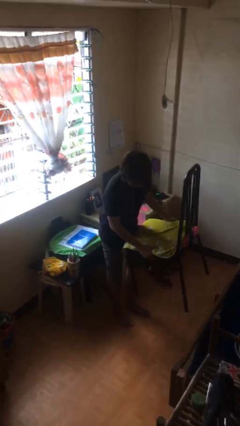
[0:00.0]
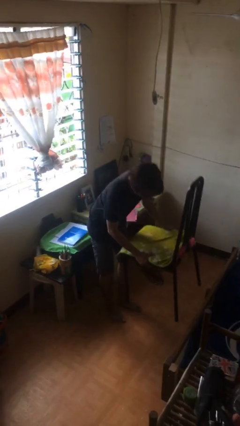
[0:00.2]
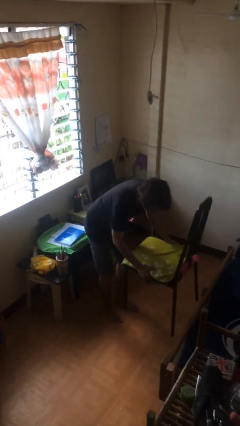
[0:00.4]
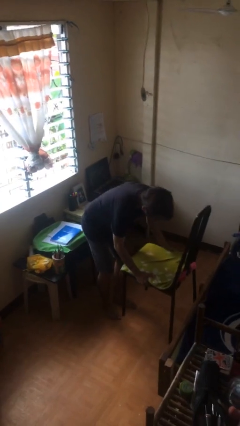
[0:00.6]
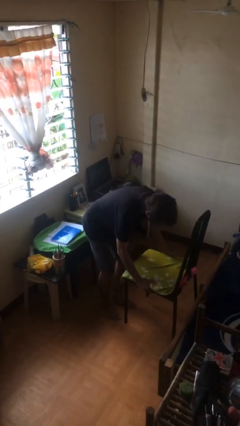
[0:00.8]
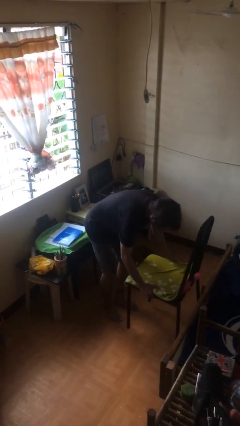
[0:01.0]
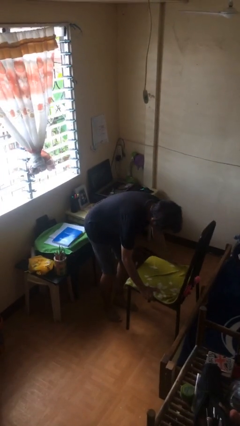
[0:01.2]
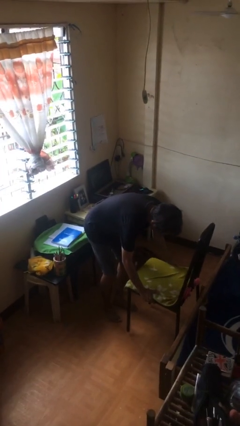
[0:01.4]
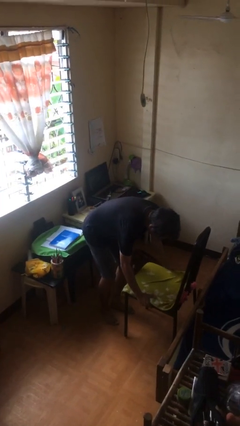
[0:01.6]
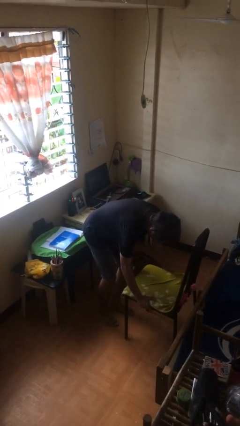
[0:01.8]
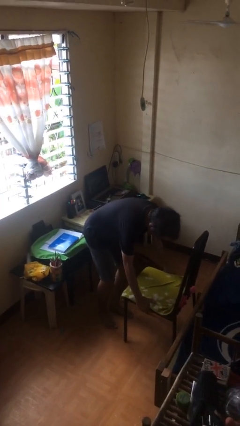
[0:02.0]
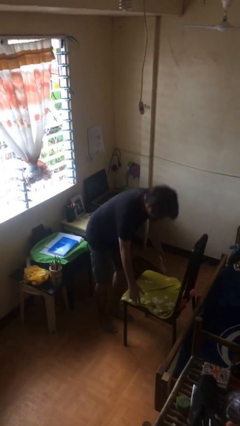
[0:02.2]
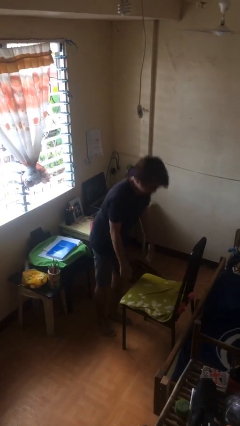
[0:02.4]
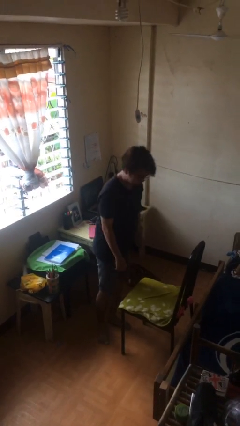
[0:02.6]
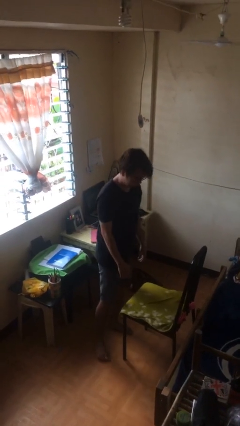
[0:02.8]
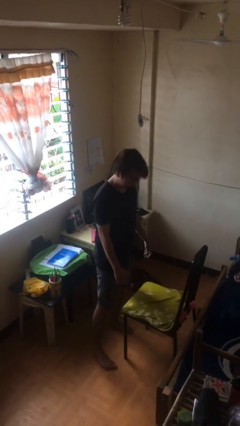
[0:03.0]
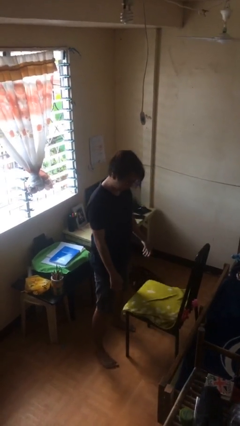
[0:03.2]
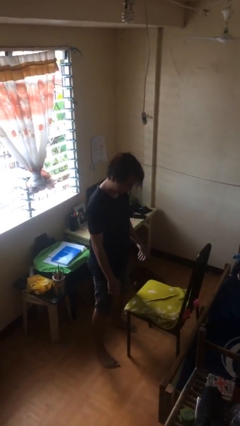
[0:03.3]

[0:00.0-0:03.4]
person puts down object on floor

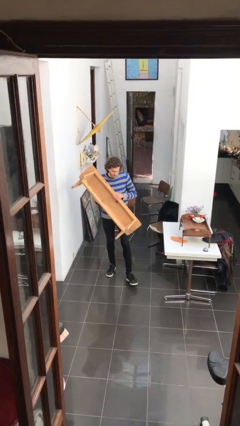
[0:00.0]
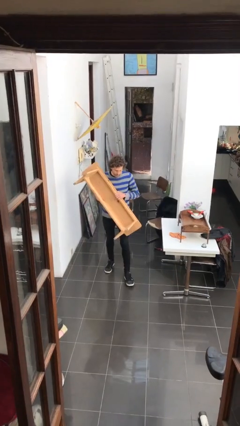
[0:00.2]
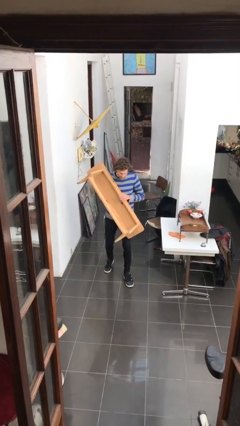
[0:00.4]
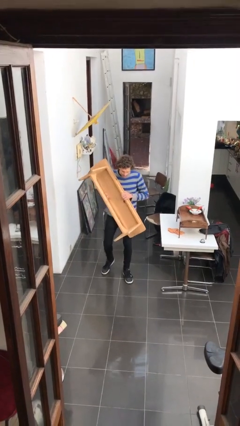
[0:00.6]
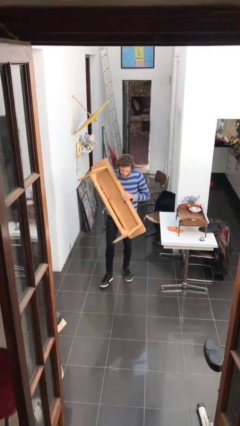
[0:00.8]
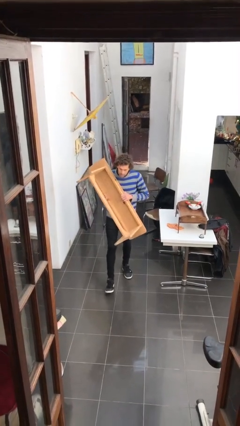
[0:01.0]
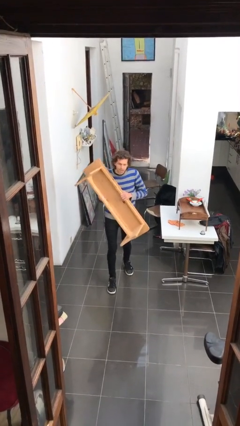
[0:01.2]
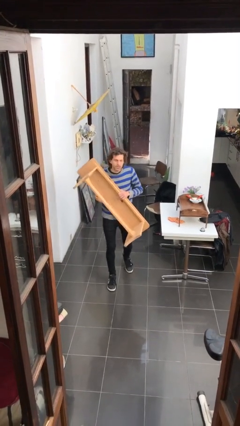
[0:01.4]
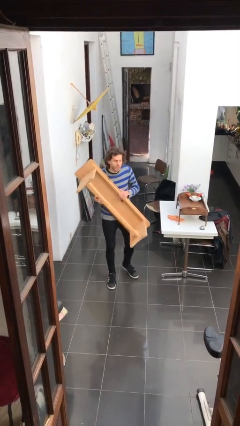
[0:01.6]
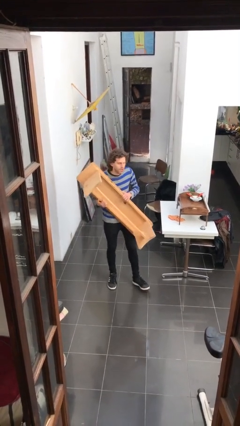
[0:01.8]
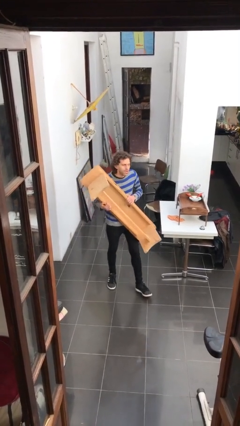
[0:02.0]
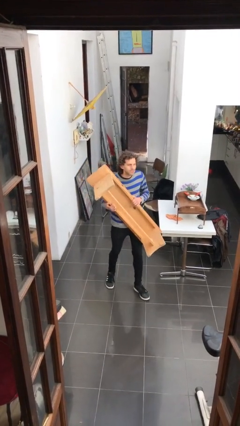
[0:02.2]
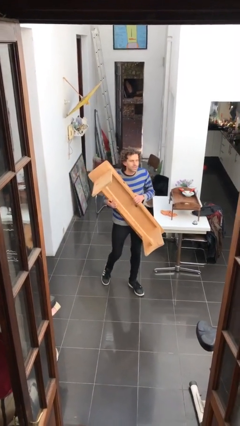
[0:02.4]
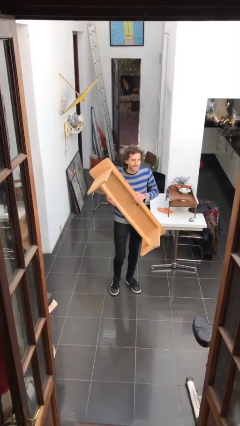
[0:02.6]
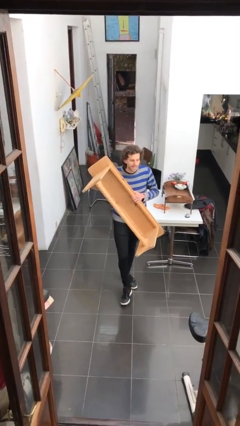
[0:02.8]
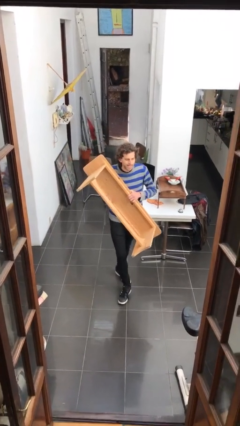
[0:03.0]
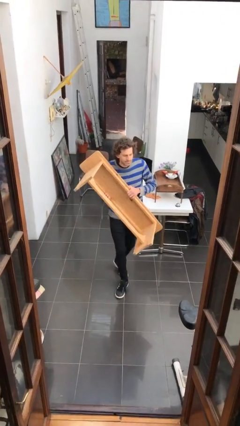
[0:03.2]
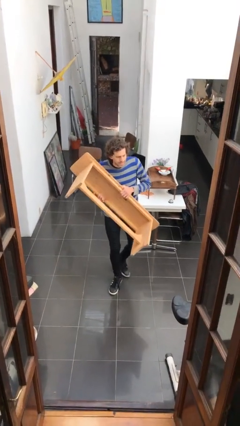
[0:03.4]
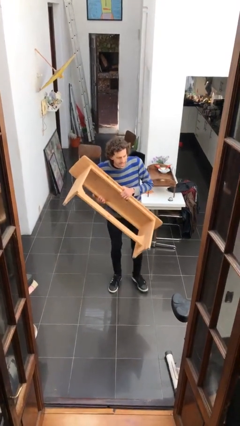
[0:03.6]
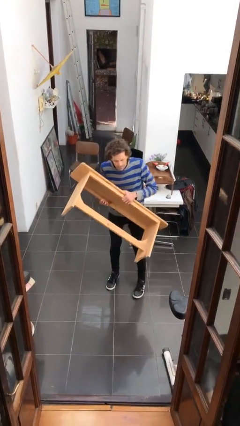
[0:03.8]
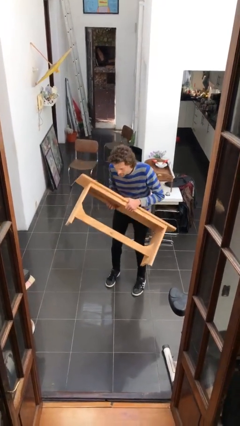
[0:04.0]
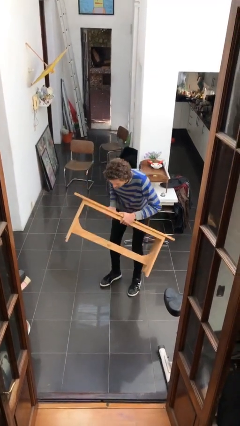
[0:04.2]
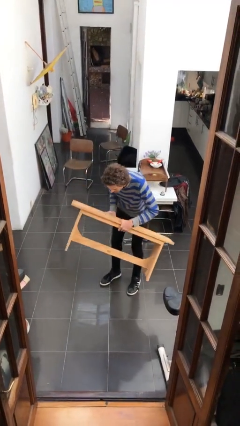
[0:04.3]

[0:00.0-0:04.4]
person carries heavy object

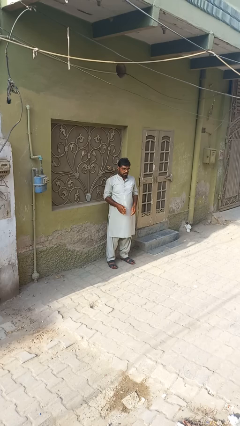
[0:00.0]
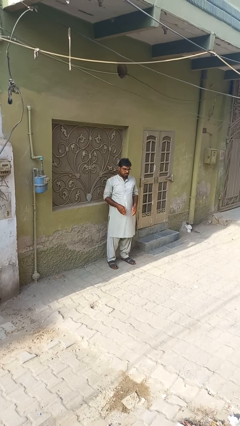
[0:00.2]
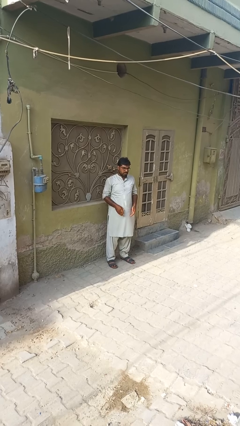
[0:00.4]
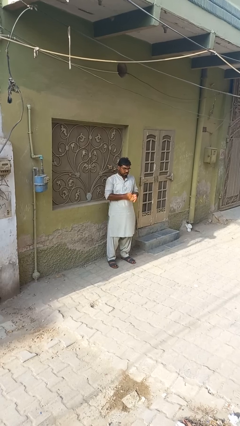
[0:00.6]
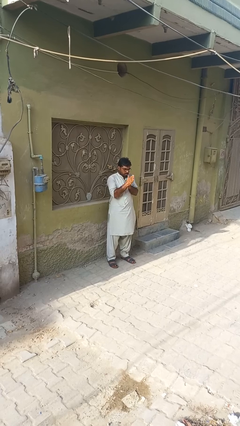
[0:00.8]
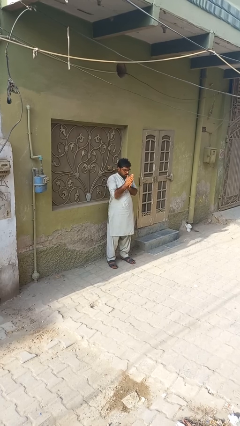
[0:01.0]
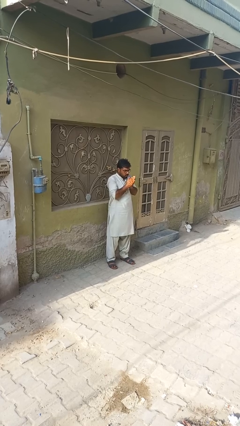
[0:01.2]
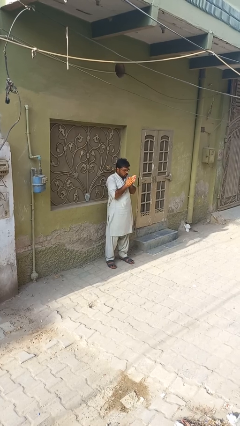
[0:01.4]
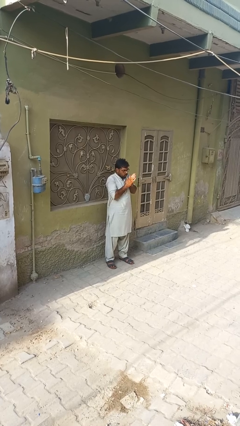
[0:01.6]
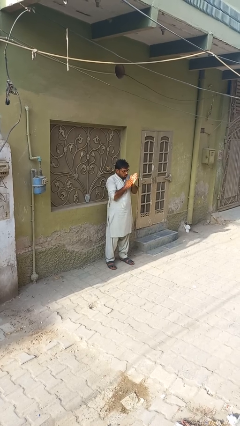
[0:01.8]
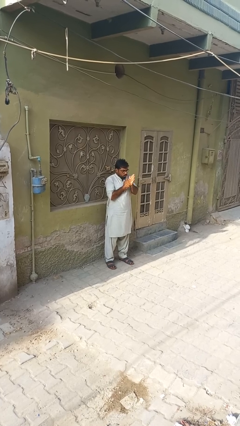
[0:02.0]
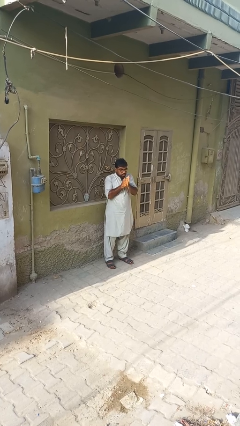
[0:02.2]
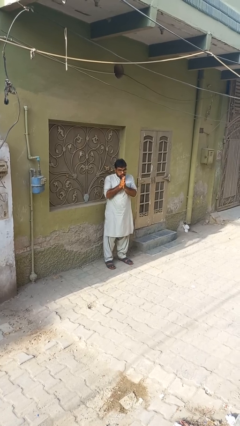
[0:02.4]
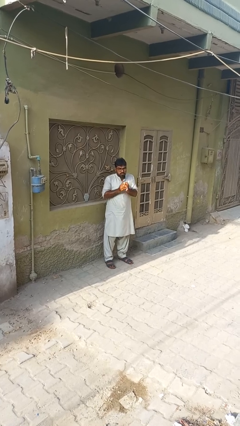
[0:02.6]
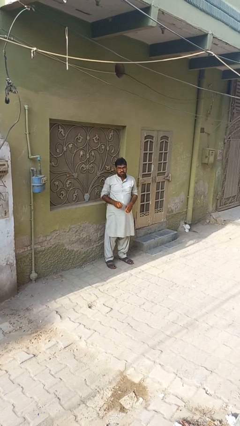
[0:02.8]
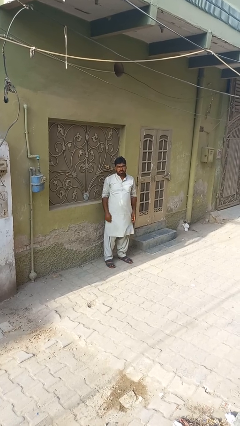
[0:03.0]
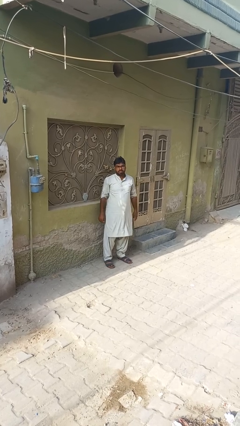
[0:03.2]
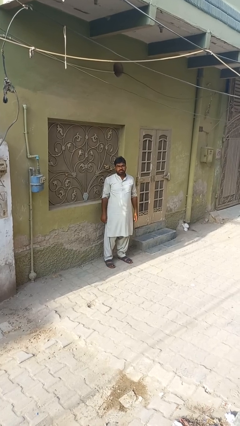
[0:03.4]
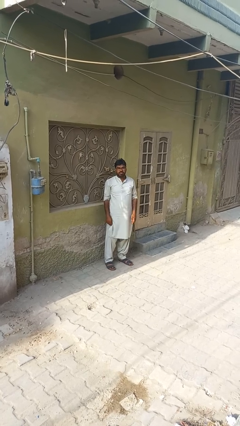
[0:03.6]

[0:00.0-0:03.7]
person blows into hands

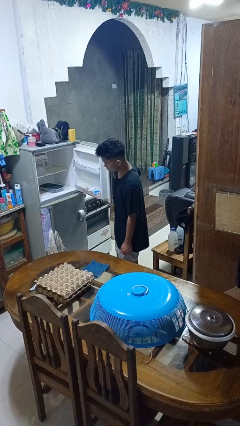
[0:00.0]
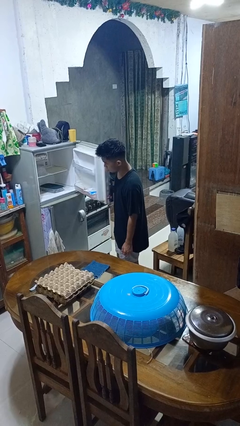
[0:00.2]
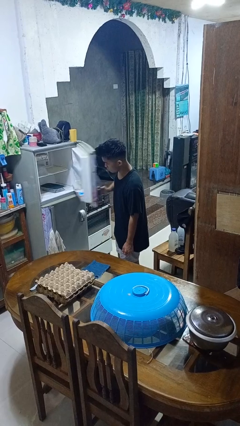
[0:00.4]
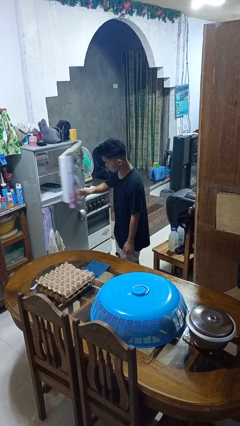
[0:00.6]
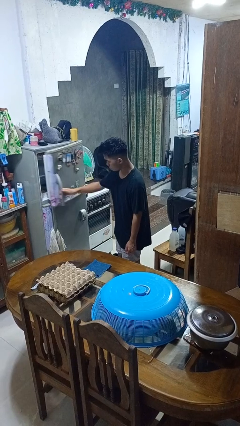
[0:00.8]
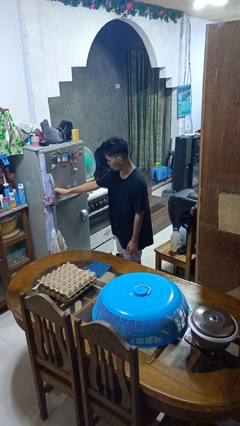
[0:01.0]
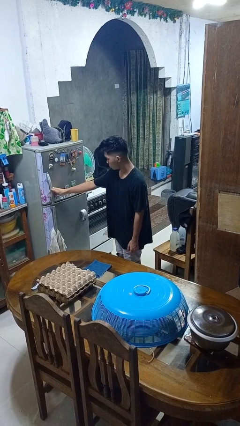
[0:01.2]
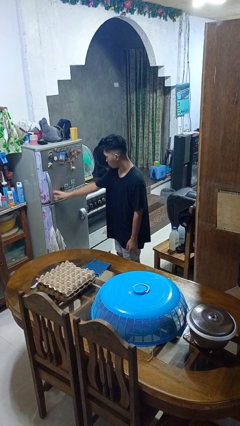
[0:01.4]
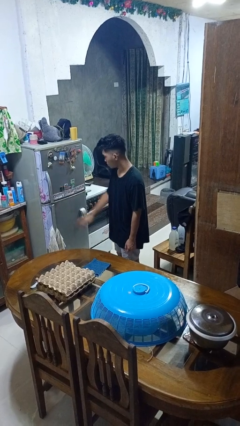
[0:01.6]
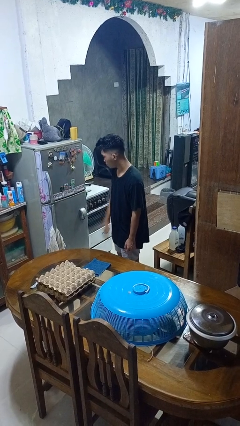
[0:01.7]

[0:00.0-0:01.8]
person closes refrigerator

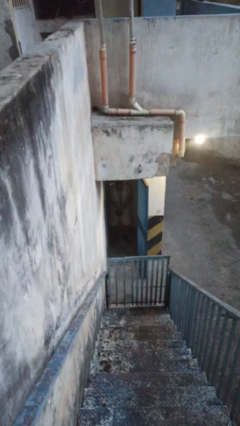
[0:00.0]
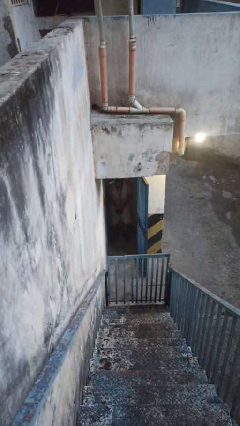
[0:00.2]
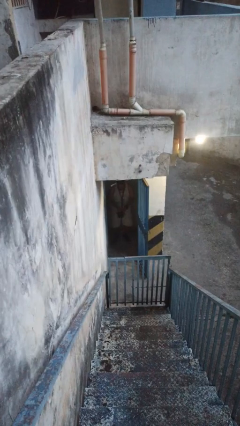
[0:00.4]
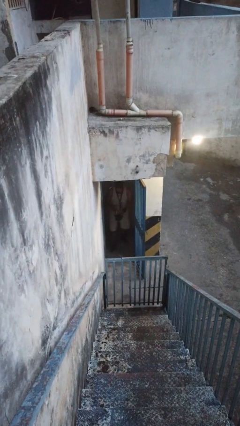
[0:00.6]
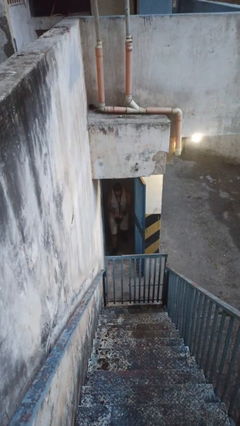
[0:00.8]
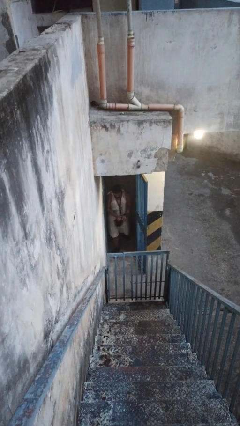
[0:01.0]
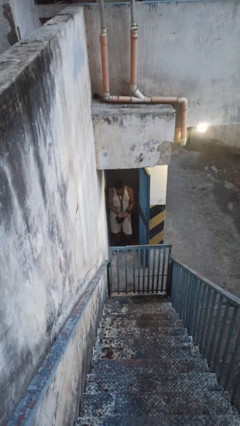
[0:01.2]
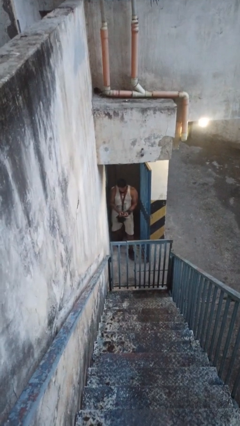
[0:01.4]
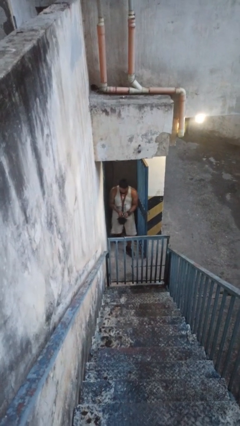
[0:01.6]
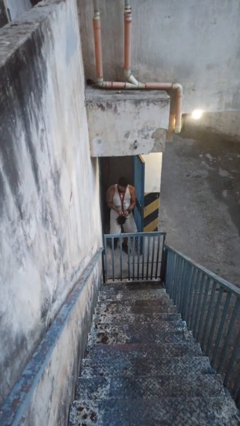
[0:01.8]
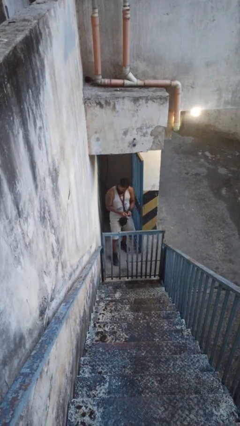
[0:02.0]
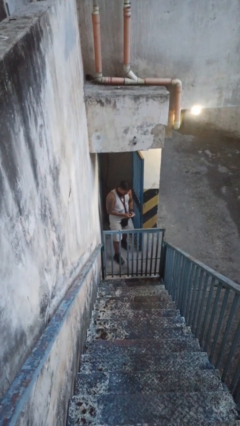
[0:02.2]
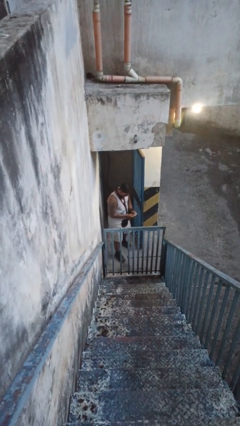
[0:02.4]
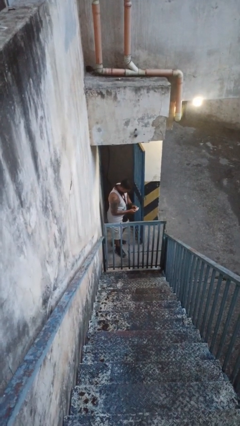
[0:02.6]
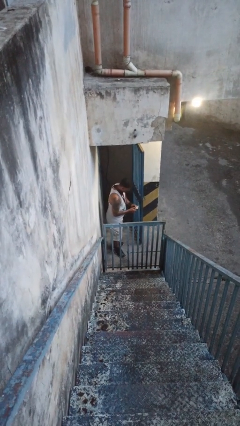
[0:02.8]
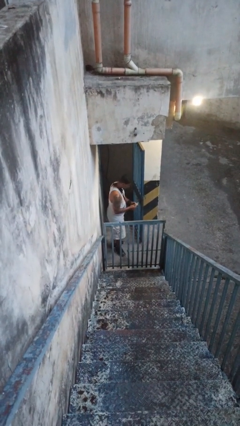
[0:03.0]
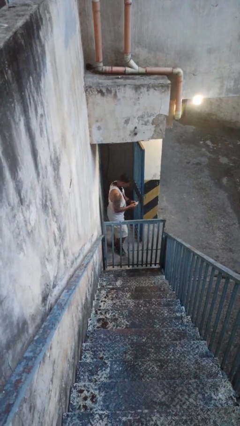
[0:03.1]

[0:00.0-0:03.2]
person enters scene through structure

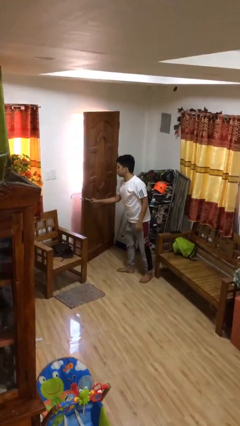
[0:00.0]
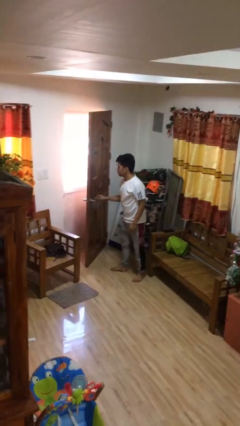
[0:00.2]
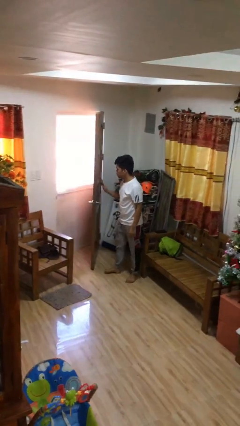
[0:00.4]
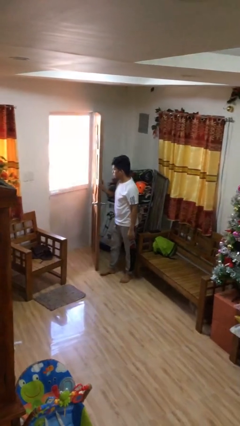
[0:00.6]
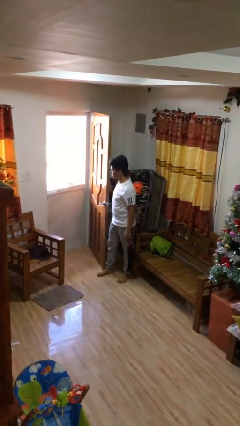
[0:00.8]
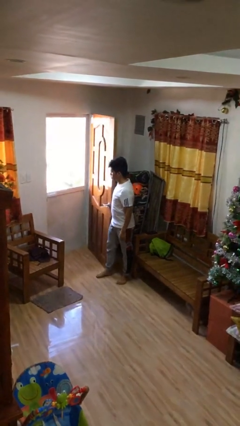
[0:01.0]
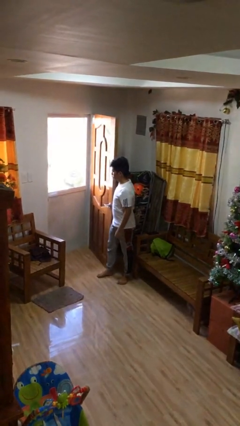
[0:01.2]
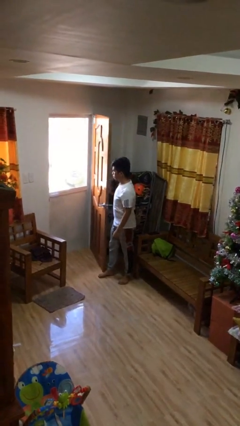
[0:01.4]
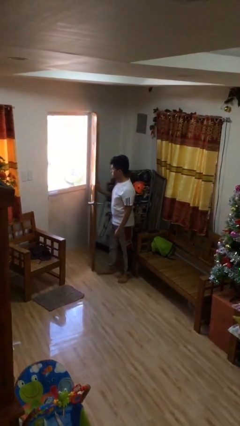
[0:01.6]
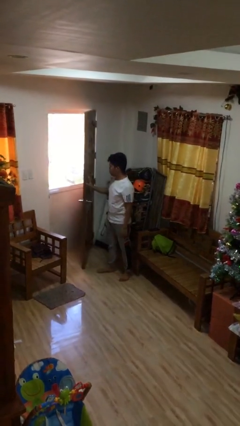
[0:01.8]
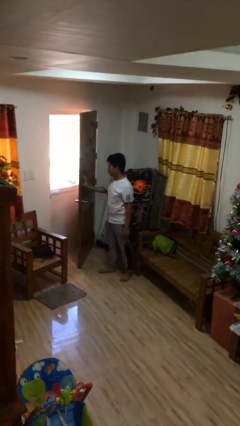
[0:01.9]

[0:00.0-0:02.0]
person opens facility door
